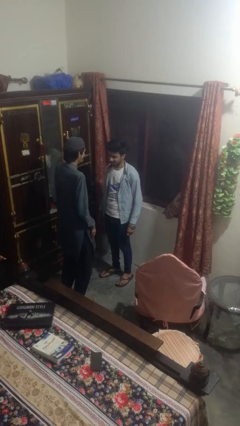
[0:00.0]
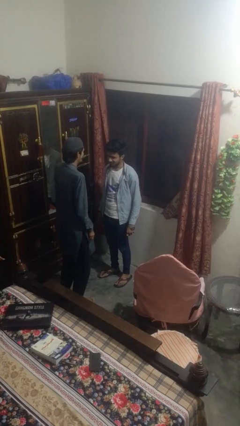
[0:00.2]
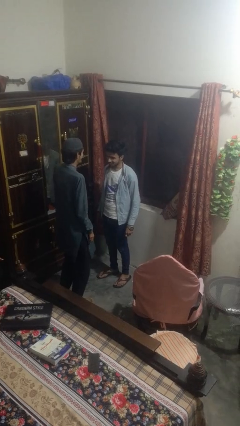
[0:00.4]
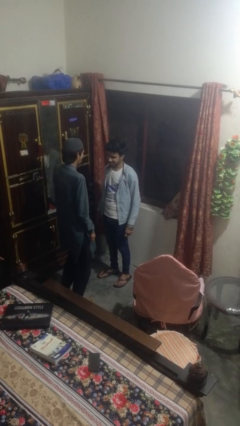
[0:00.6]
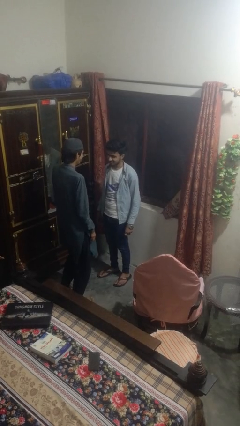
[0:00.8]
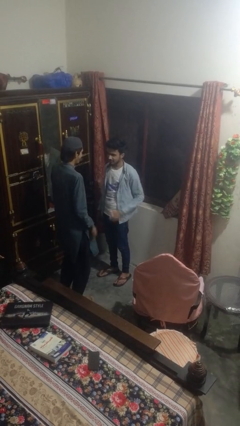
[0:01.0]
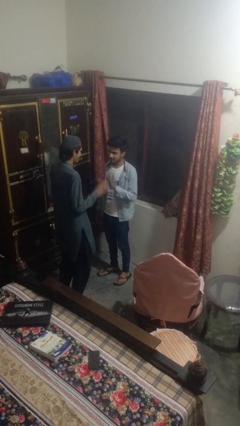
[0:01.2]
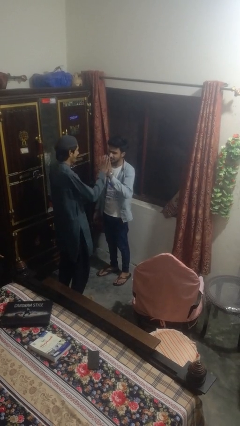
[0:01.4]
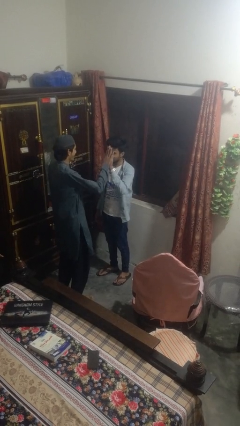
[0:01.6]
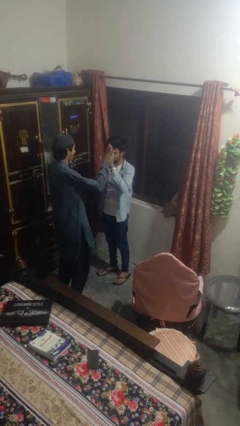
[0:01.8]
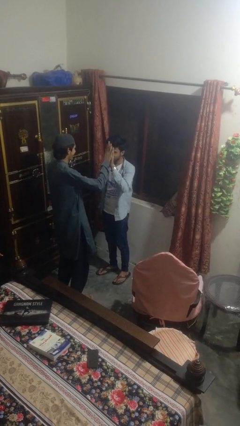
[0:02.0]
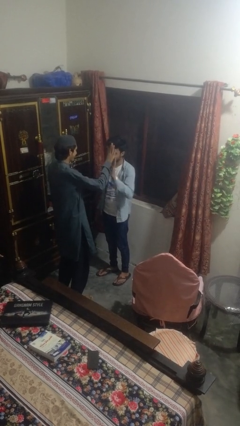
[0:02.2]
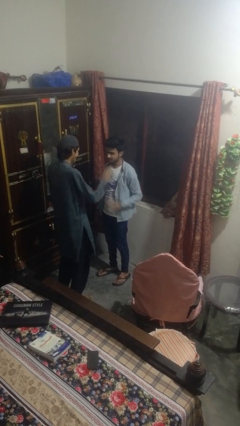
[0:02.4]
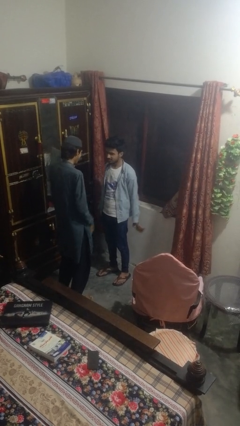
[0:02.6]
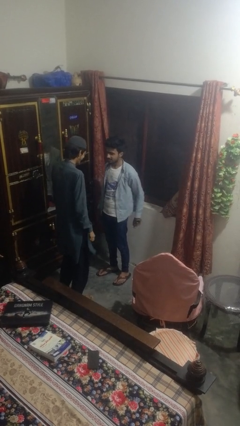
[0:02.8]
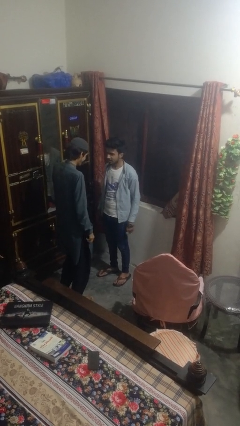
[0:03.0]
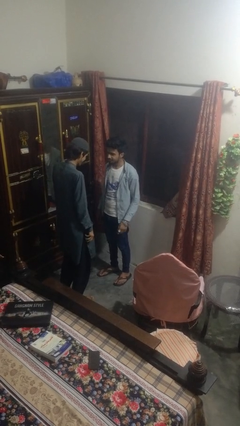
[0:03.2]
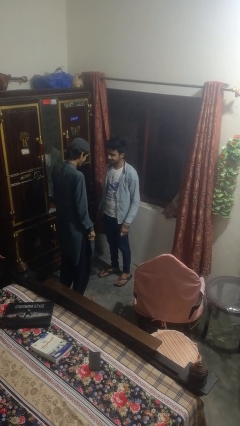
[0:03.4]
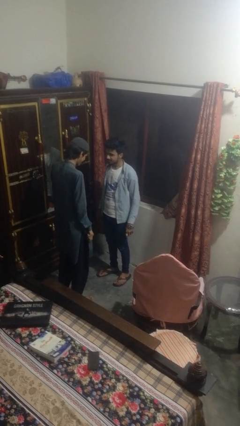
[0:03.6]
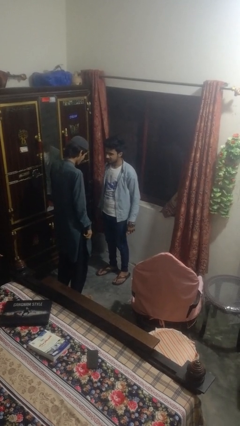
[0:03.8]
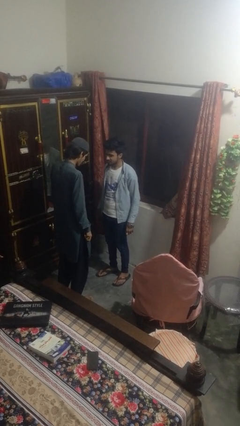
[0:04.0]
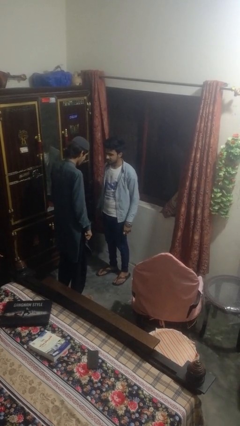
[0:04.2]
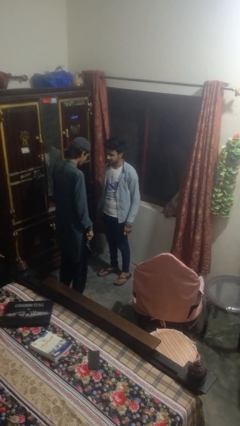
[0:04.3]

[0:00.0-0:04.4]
person highfives hand

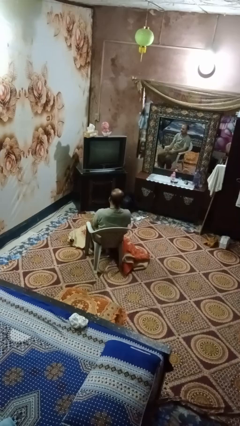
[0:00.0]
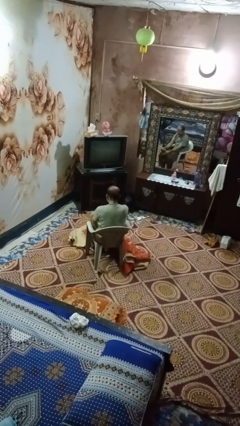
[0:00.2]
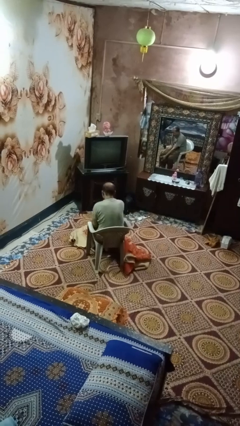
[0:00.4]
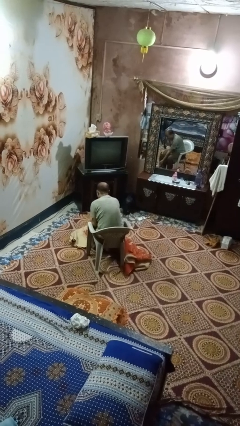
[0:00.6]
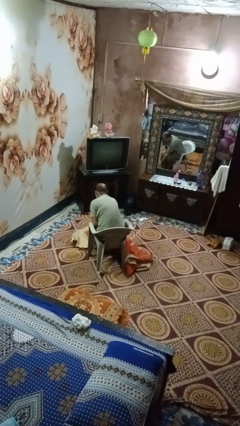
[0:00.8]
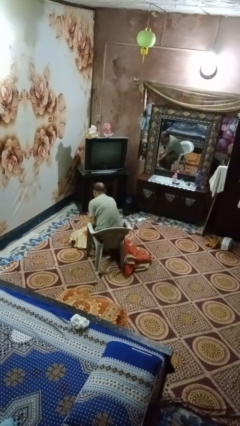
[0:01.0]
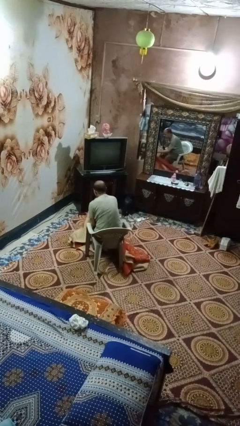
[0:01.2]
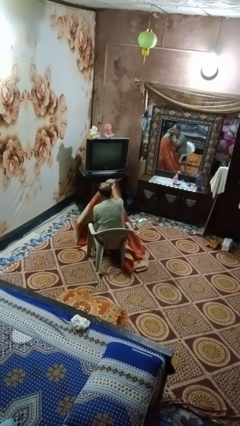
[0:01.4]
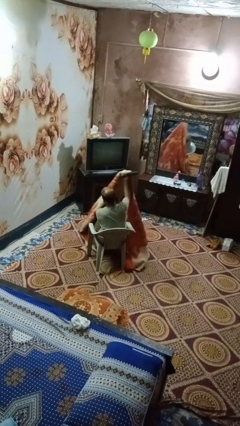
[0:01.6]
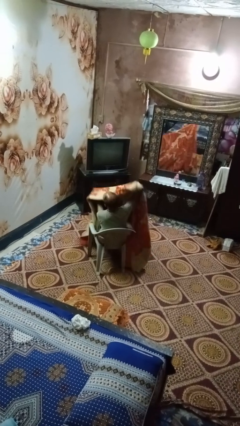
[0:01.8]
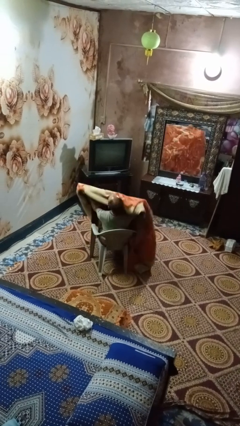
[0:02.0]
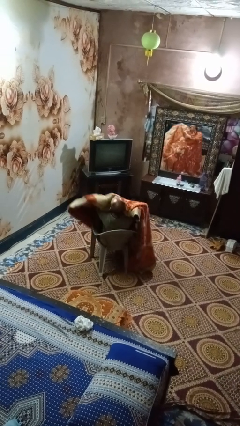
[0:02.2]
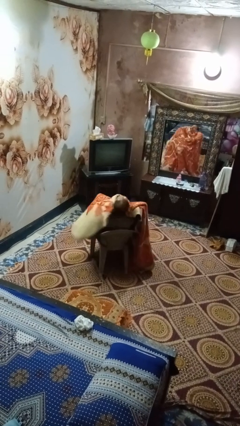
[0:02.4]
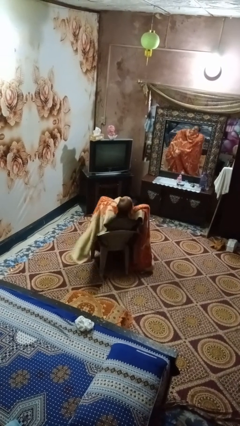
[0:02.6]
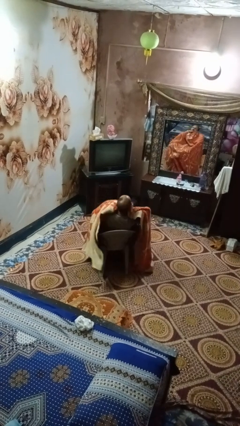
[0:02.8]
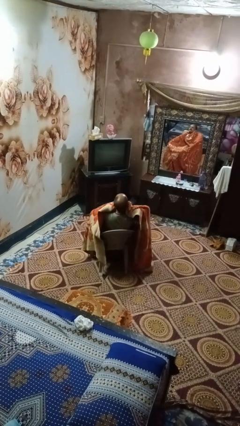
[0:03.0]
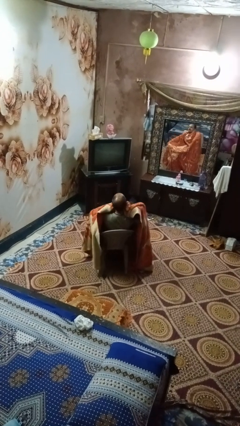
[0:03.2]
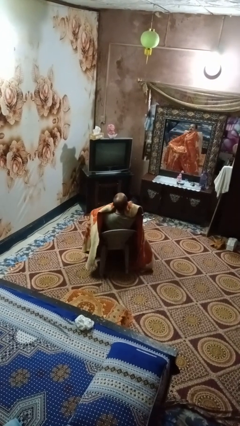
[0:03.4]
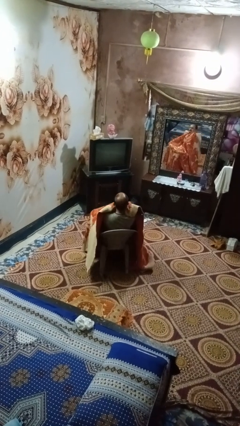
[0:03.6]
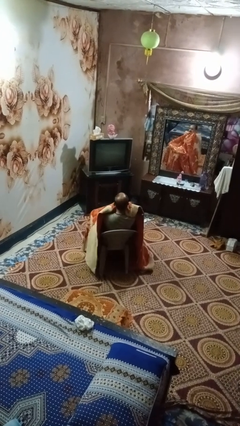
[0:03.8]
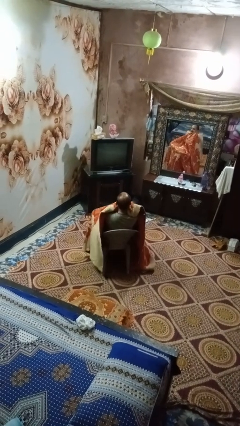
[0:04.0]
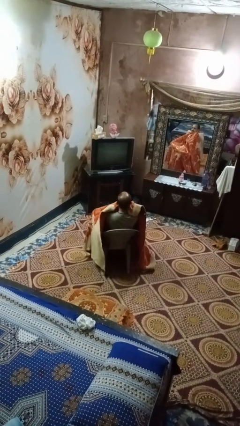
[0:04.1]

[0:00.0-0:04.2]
person covers with blanket

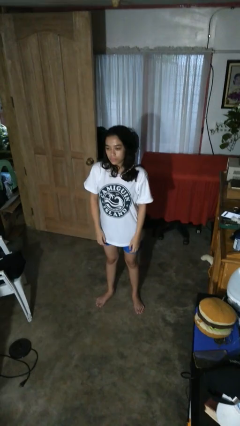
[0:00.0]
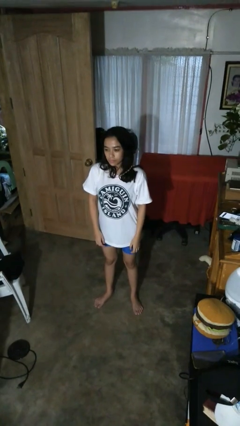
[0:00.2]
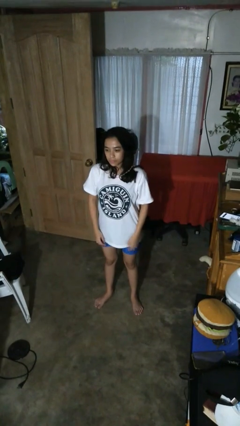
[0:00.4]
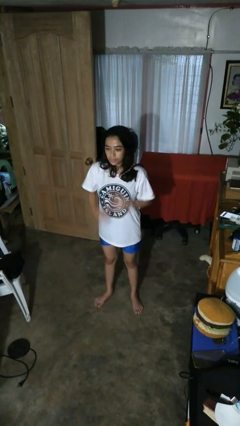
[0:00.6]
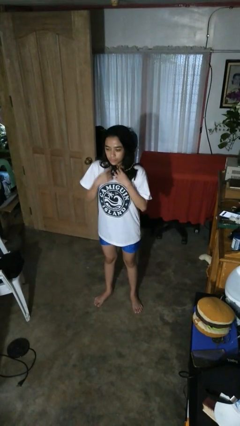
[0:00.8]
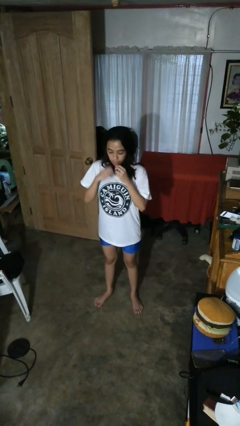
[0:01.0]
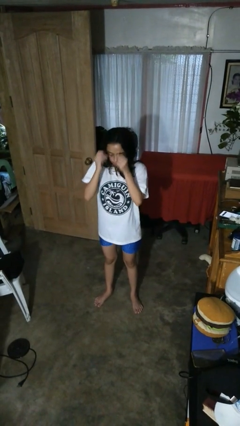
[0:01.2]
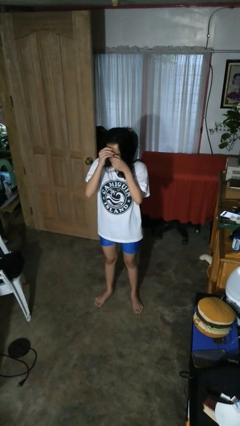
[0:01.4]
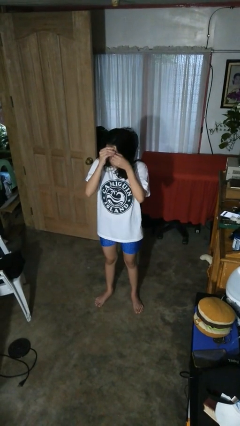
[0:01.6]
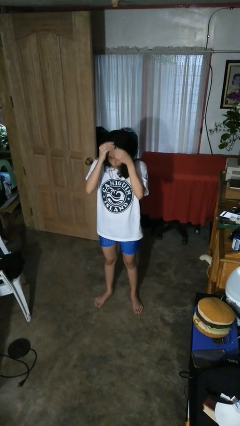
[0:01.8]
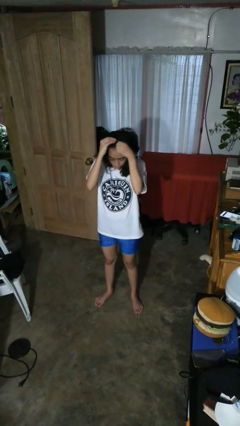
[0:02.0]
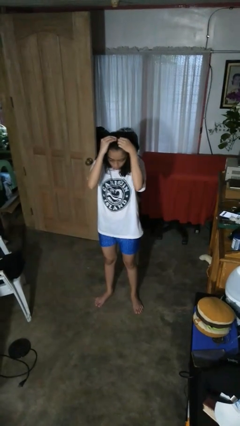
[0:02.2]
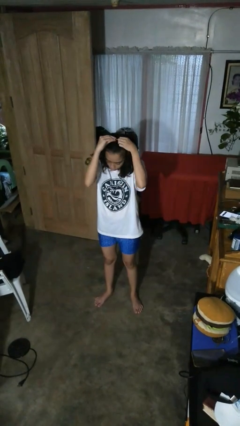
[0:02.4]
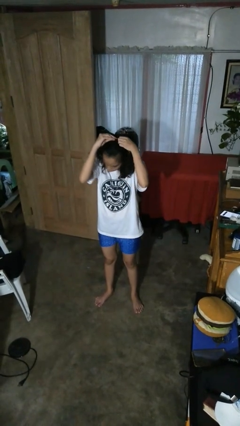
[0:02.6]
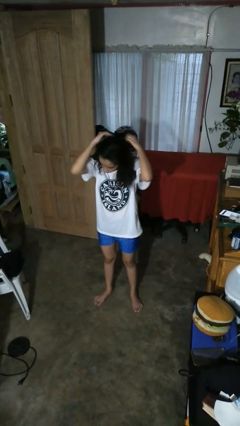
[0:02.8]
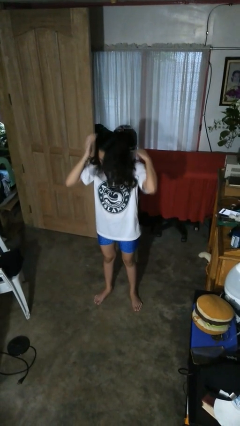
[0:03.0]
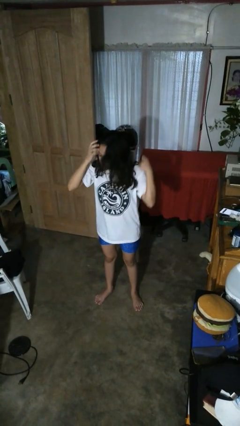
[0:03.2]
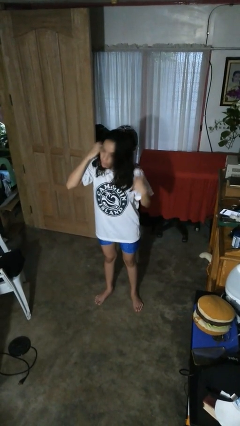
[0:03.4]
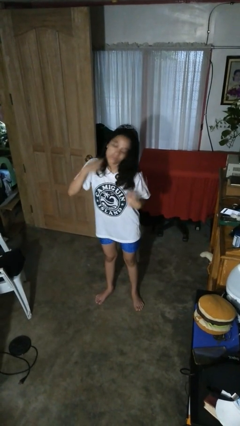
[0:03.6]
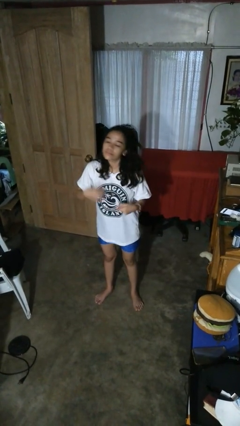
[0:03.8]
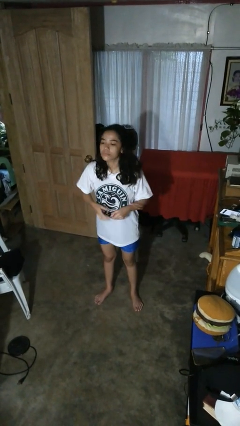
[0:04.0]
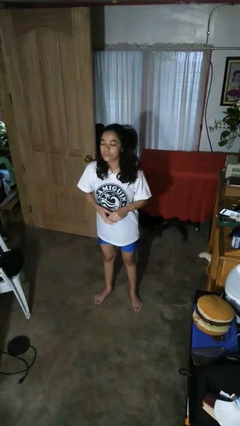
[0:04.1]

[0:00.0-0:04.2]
person takes off necklace

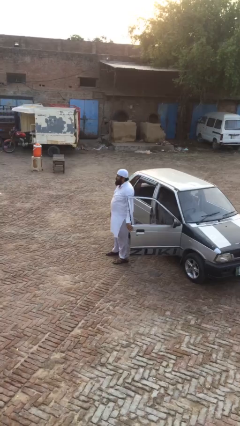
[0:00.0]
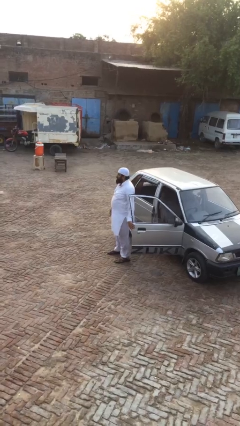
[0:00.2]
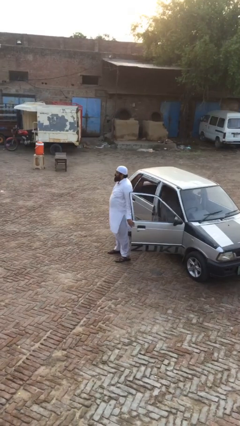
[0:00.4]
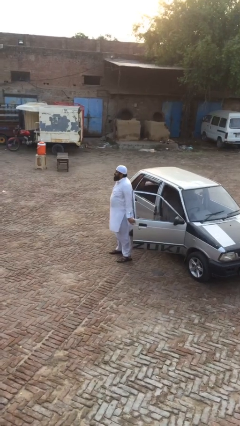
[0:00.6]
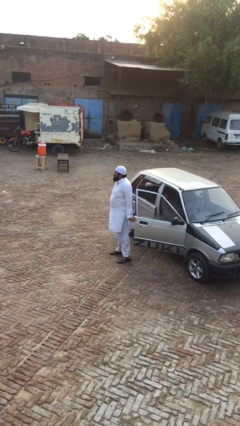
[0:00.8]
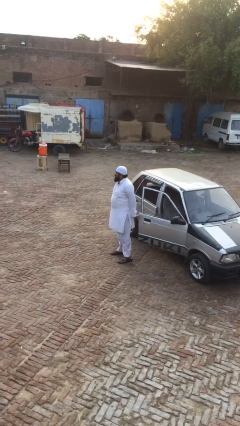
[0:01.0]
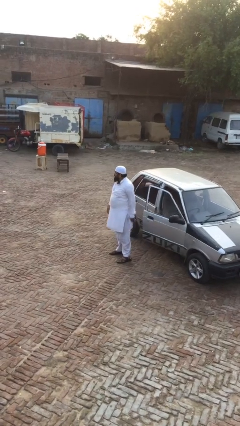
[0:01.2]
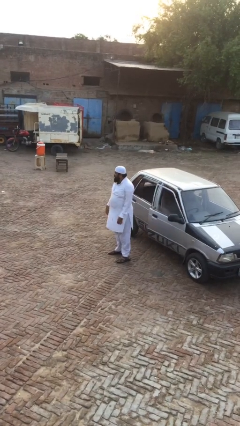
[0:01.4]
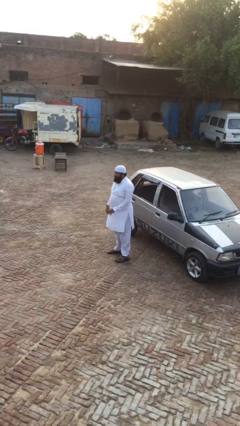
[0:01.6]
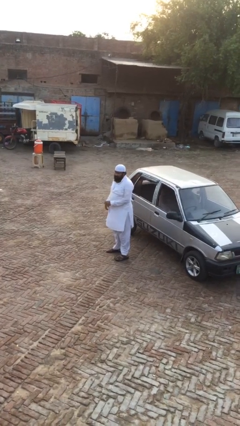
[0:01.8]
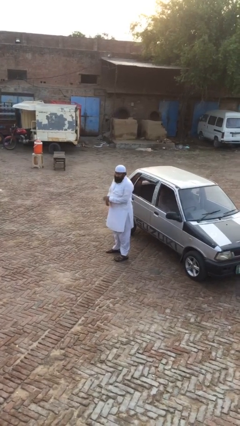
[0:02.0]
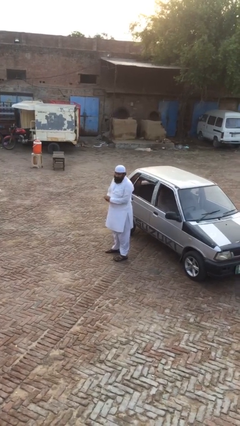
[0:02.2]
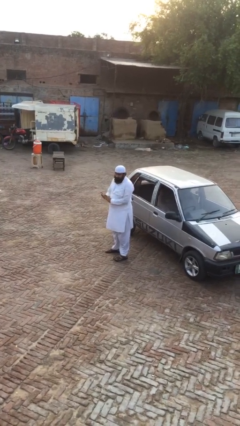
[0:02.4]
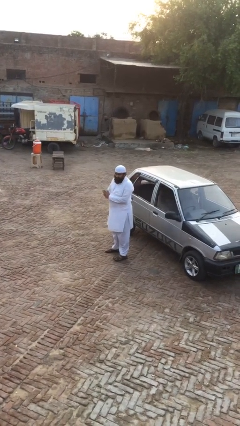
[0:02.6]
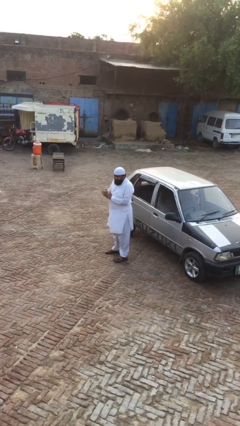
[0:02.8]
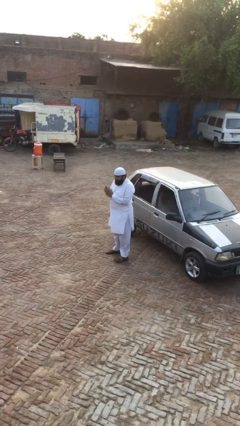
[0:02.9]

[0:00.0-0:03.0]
person closes car door

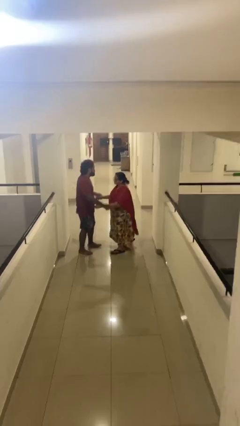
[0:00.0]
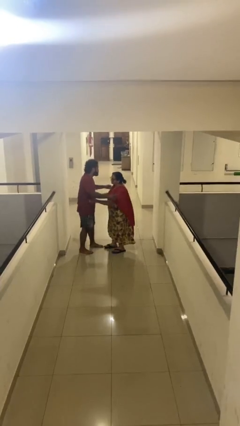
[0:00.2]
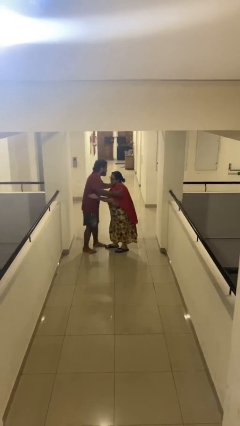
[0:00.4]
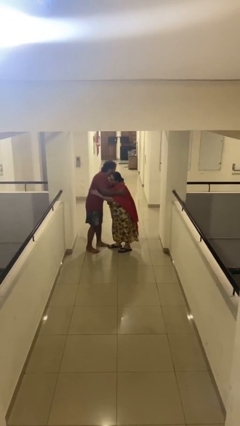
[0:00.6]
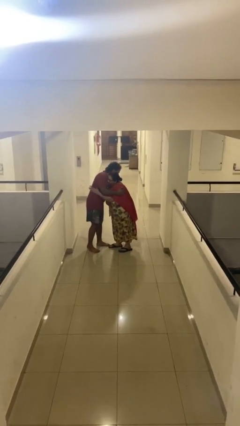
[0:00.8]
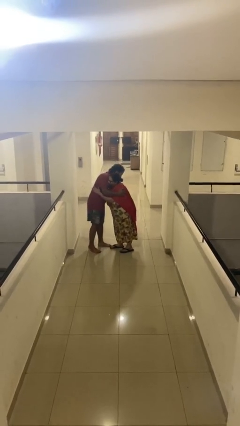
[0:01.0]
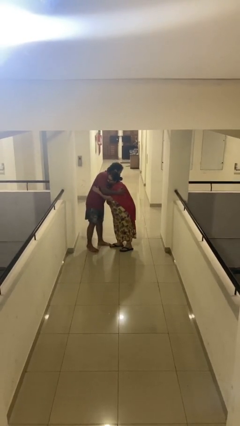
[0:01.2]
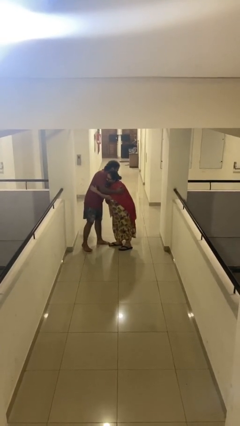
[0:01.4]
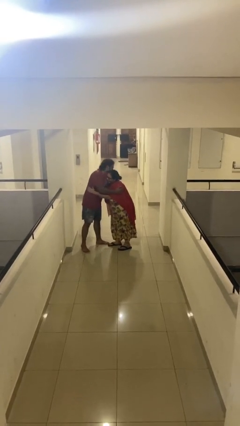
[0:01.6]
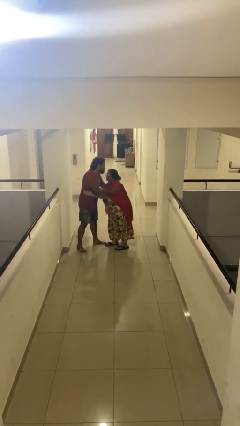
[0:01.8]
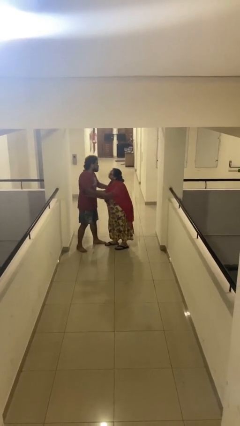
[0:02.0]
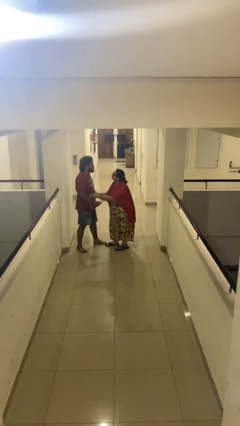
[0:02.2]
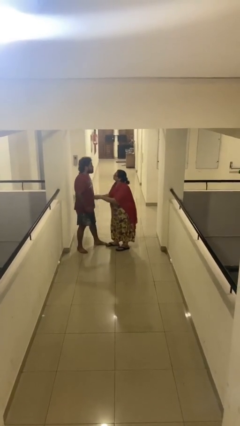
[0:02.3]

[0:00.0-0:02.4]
person embraces person
